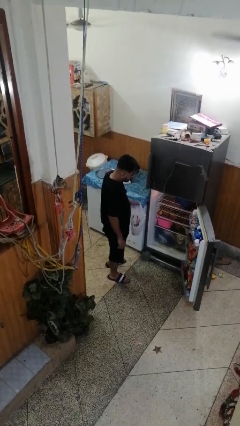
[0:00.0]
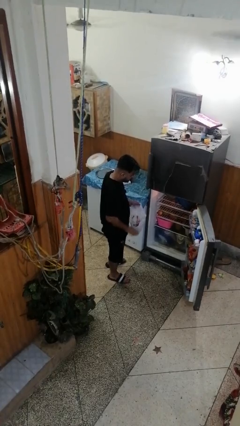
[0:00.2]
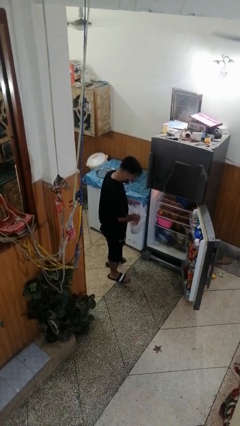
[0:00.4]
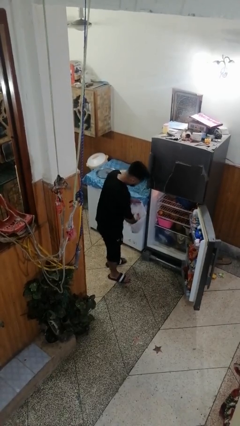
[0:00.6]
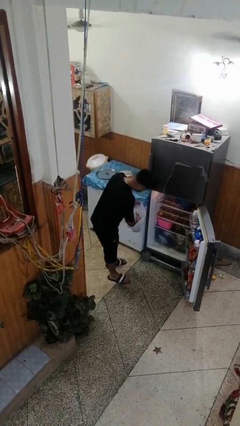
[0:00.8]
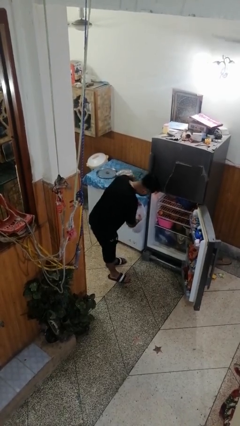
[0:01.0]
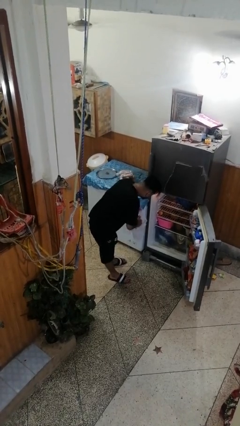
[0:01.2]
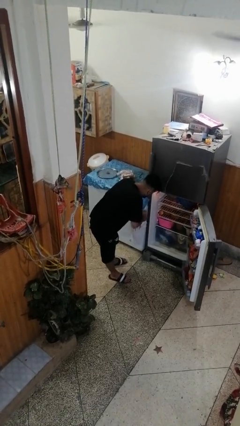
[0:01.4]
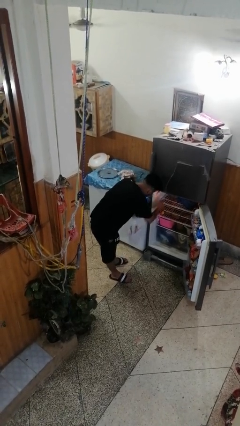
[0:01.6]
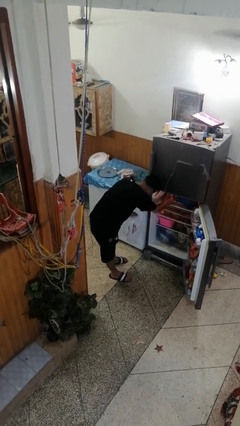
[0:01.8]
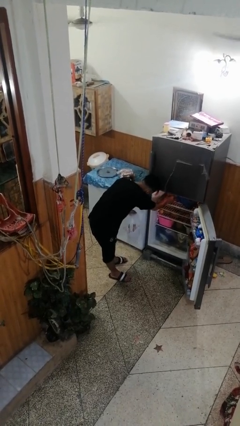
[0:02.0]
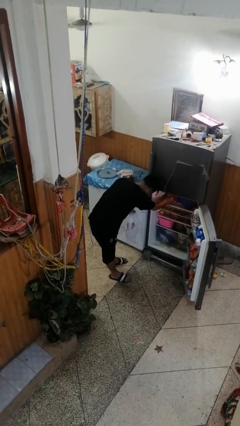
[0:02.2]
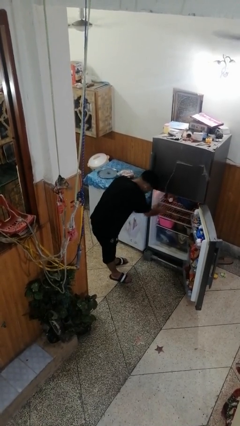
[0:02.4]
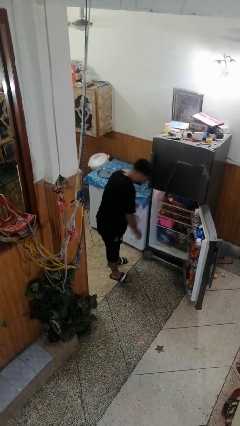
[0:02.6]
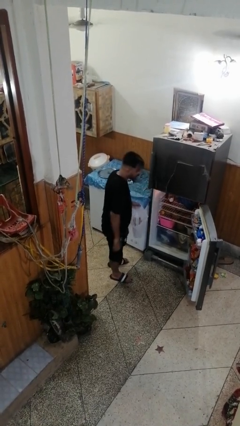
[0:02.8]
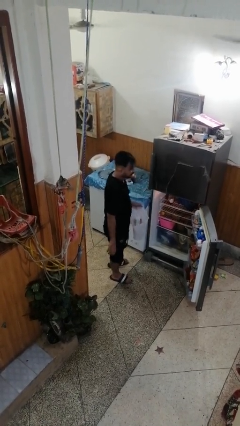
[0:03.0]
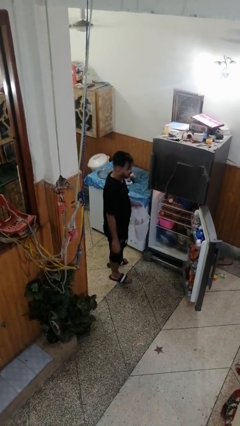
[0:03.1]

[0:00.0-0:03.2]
person loads groceries into refrigerator

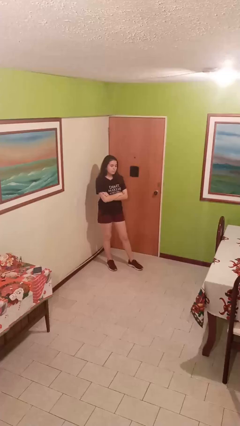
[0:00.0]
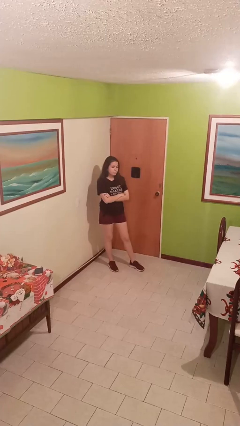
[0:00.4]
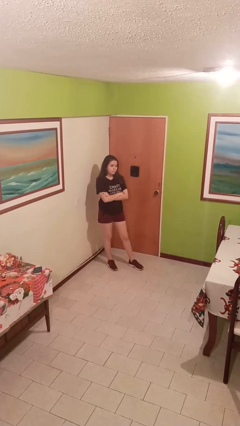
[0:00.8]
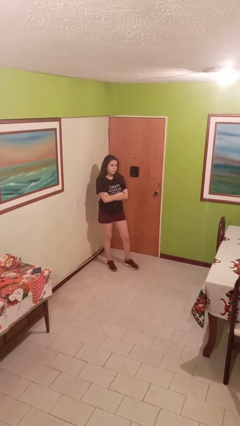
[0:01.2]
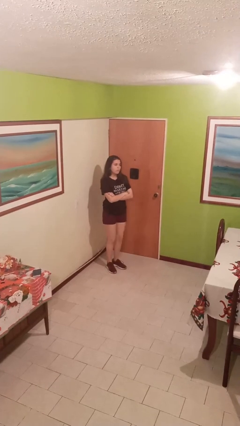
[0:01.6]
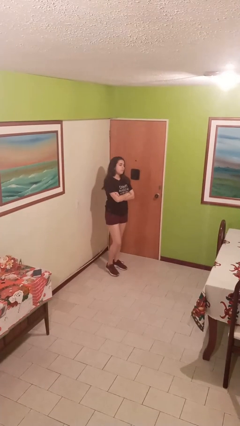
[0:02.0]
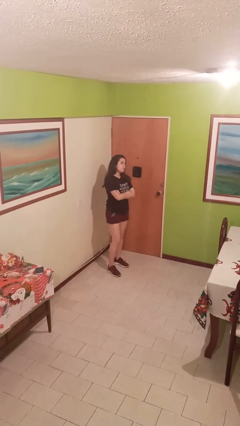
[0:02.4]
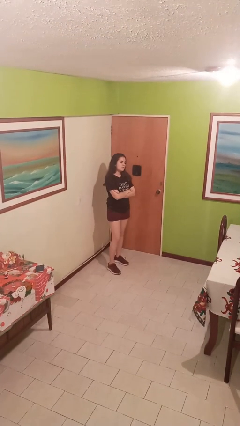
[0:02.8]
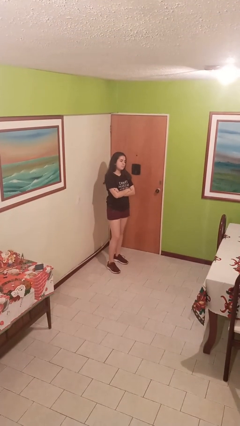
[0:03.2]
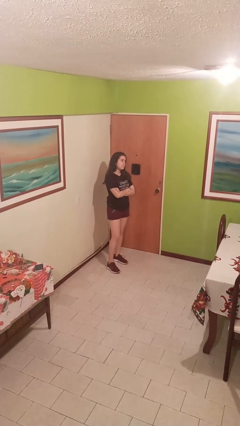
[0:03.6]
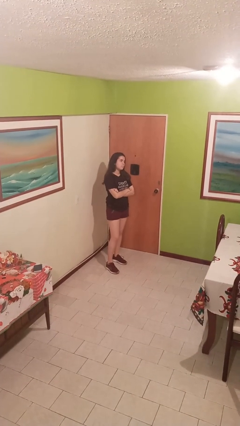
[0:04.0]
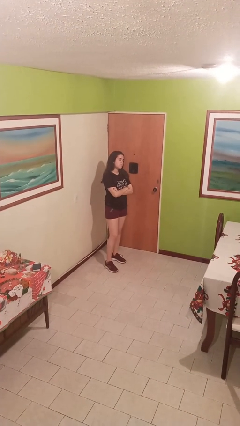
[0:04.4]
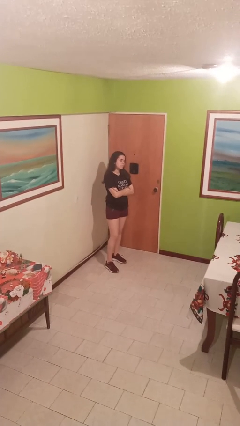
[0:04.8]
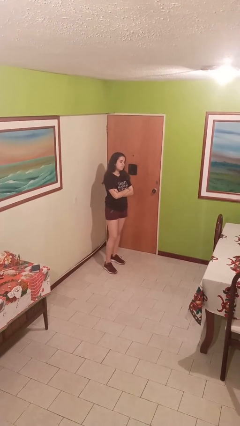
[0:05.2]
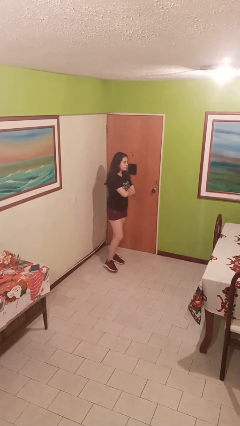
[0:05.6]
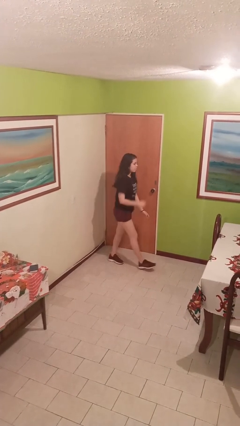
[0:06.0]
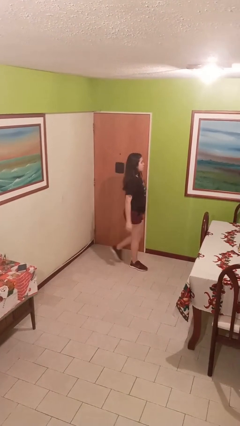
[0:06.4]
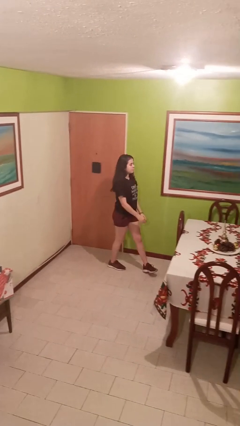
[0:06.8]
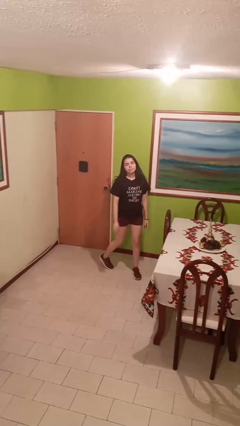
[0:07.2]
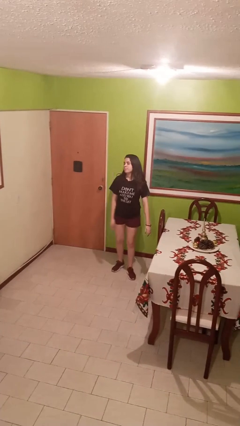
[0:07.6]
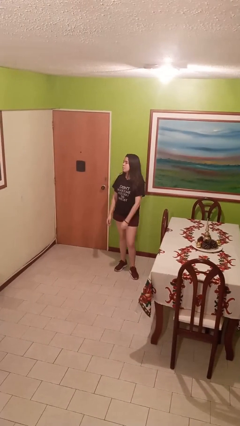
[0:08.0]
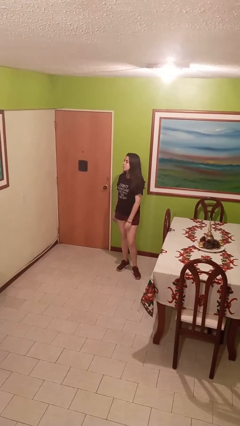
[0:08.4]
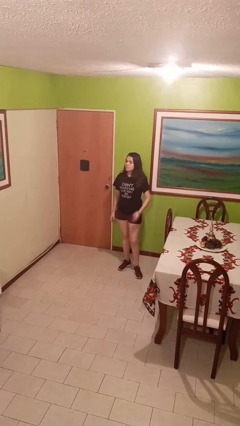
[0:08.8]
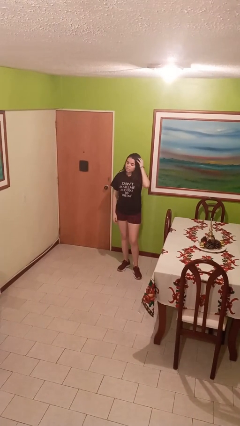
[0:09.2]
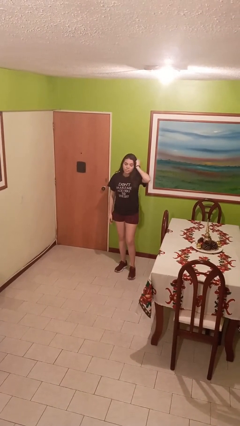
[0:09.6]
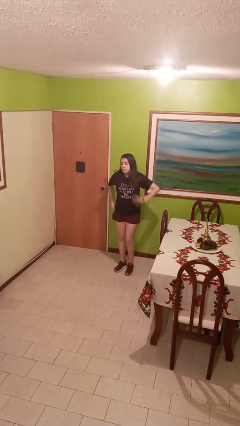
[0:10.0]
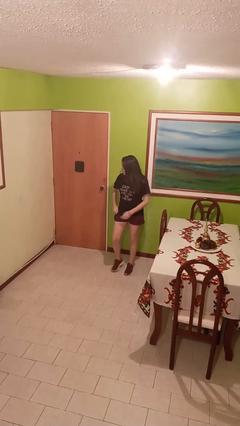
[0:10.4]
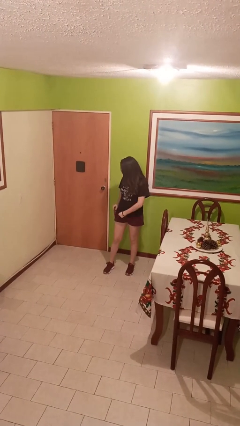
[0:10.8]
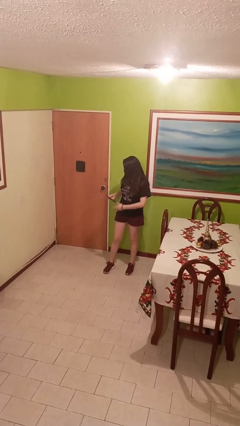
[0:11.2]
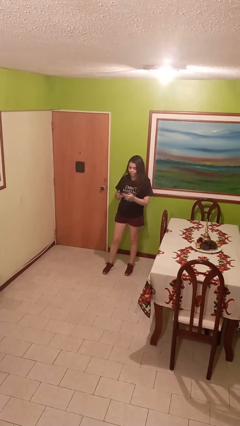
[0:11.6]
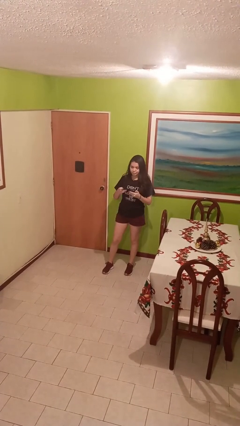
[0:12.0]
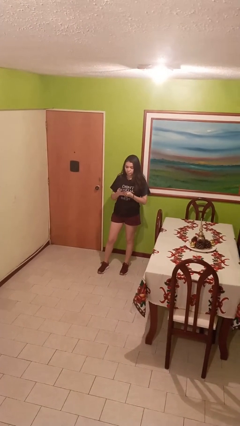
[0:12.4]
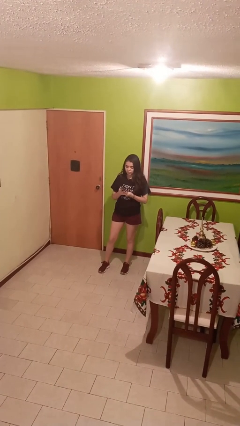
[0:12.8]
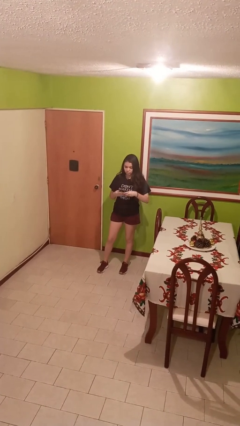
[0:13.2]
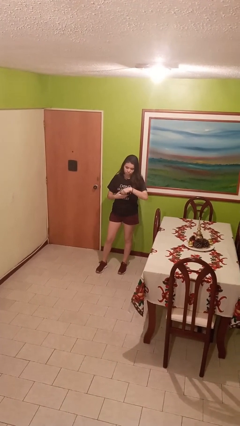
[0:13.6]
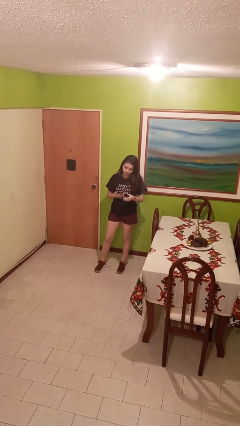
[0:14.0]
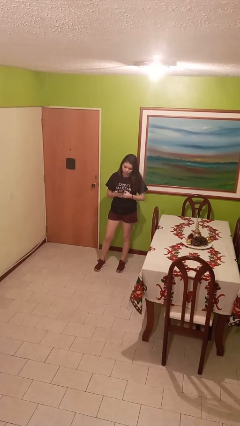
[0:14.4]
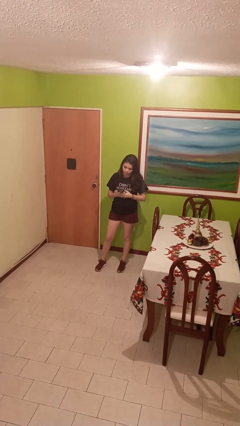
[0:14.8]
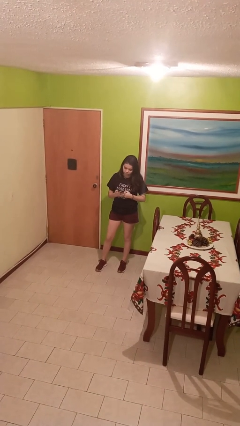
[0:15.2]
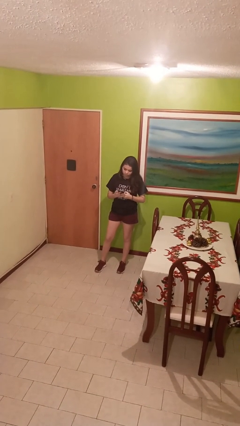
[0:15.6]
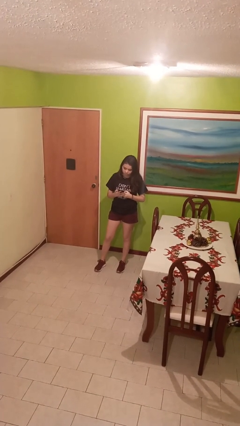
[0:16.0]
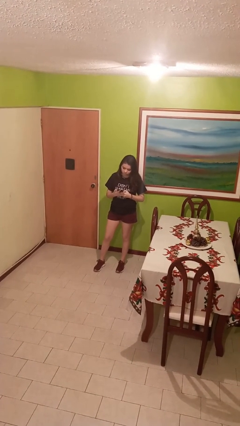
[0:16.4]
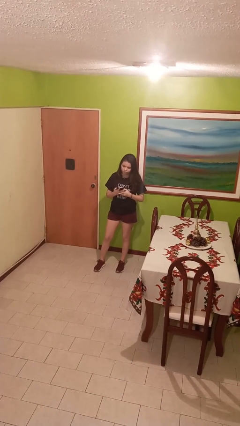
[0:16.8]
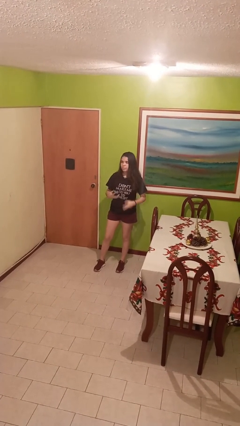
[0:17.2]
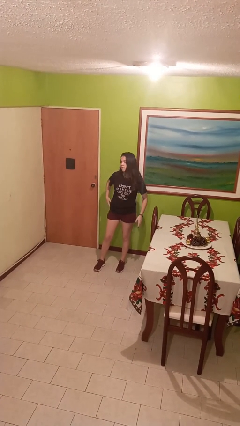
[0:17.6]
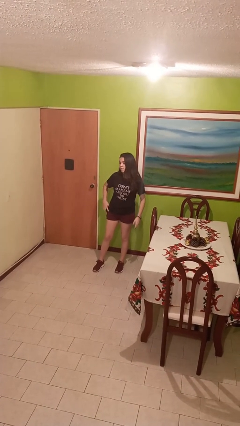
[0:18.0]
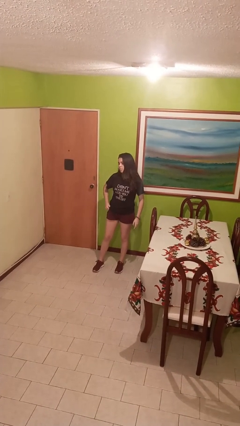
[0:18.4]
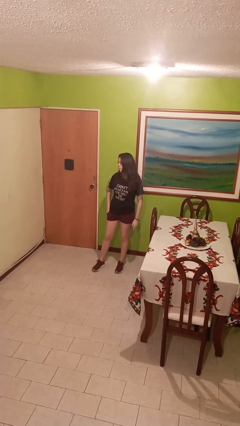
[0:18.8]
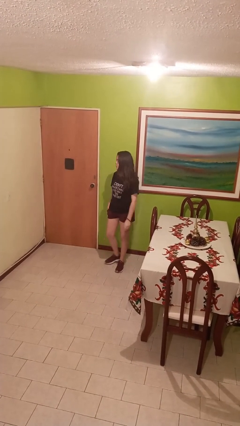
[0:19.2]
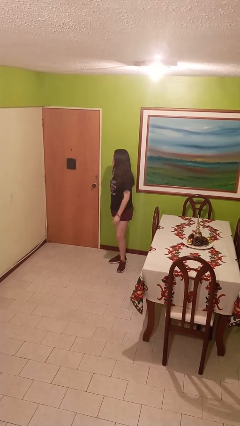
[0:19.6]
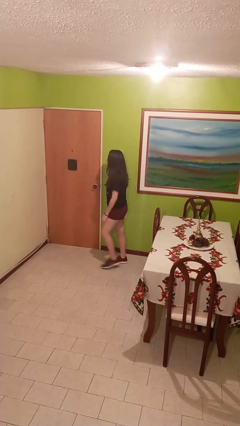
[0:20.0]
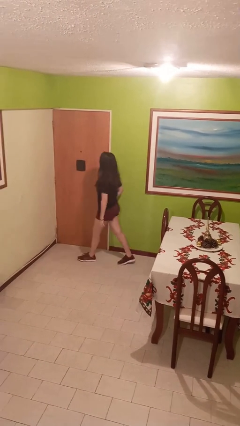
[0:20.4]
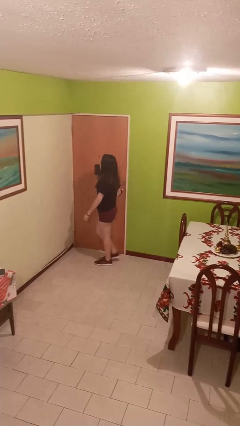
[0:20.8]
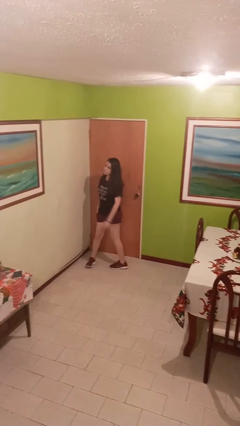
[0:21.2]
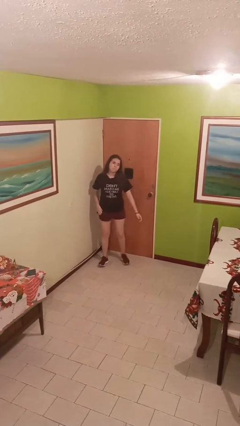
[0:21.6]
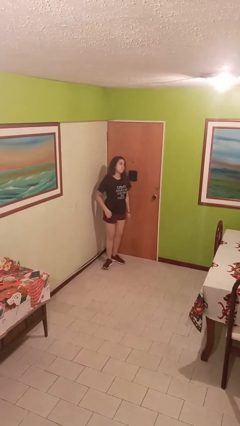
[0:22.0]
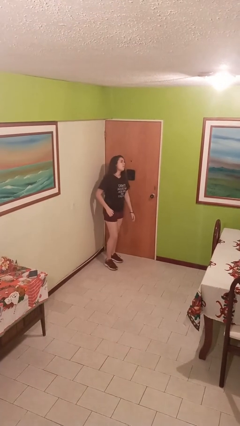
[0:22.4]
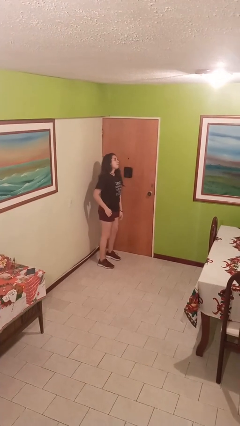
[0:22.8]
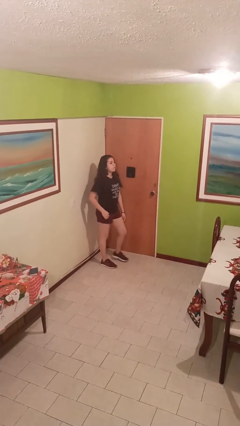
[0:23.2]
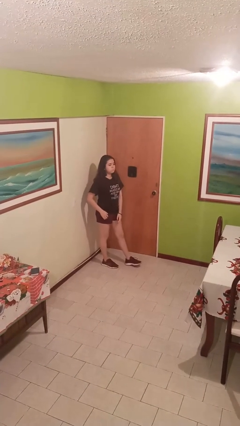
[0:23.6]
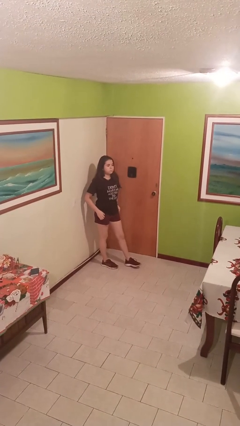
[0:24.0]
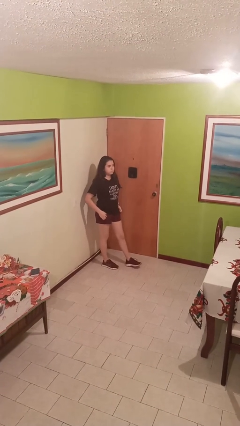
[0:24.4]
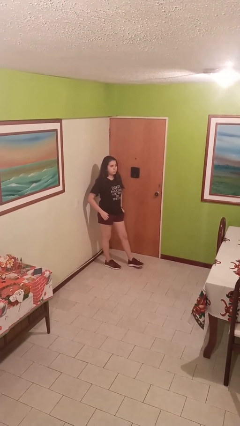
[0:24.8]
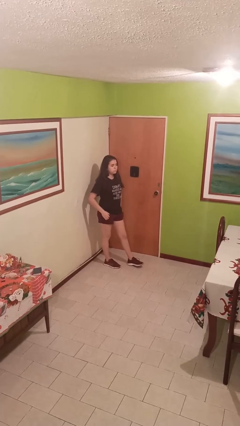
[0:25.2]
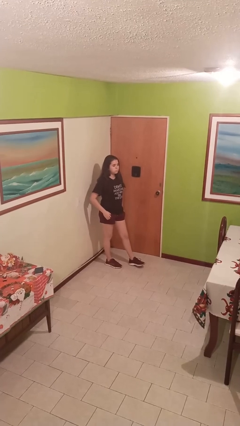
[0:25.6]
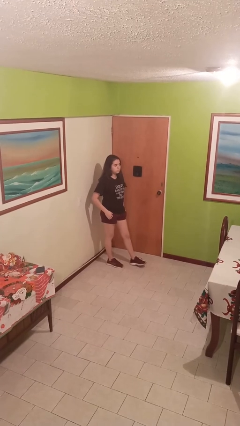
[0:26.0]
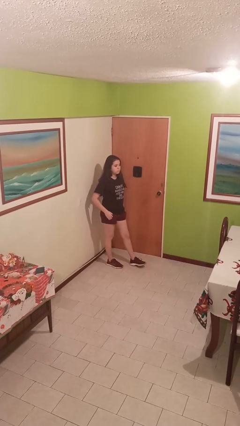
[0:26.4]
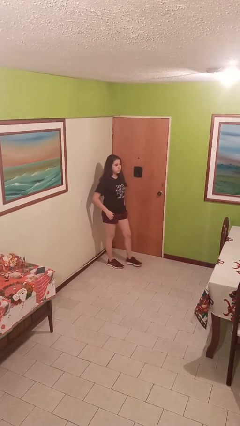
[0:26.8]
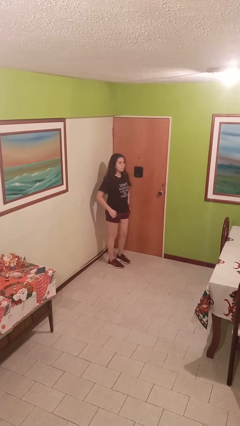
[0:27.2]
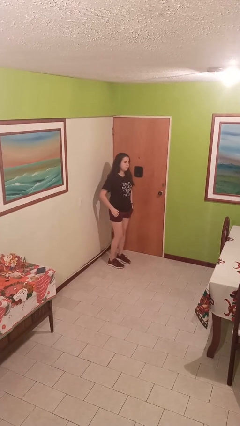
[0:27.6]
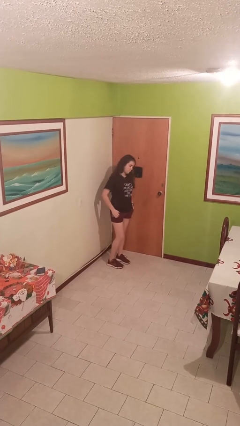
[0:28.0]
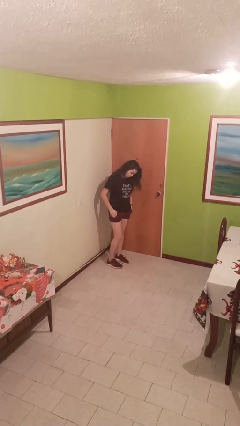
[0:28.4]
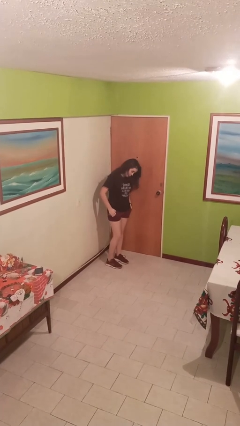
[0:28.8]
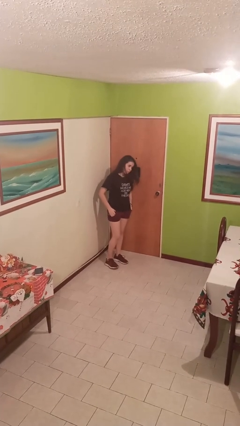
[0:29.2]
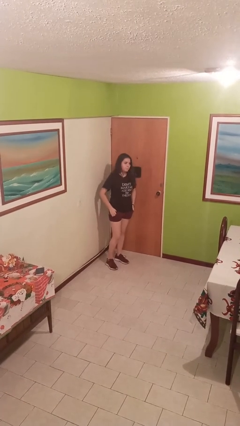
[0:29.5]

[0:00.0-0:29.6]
person walks
